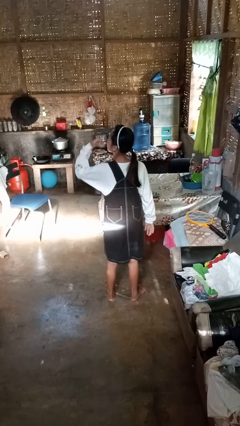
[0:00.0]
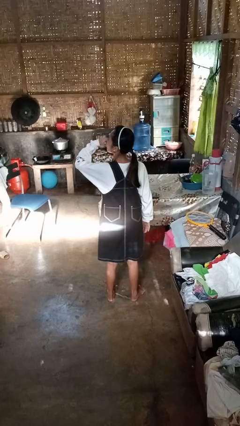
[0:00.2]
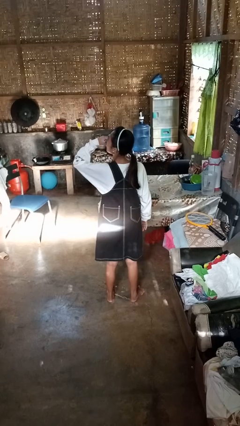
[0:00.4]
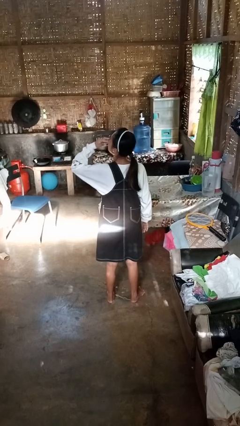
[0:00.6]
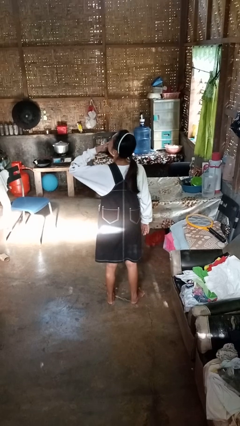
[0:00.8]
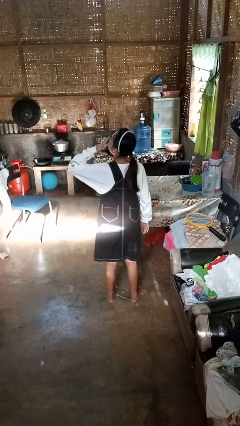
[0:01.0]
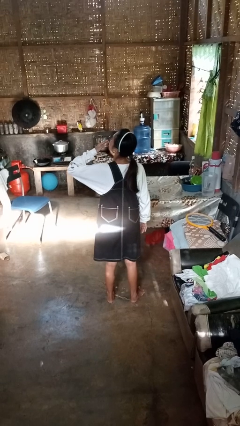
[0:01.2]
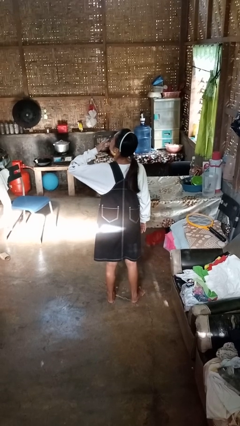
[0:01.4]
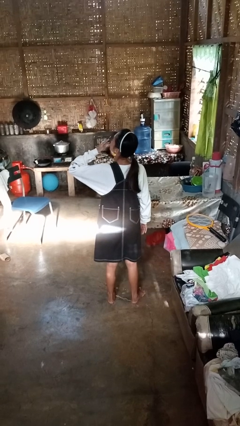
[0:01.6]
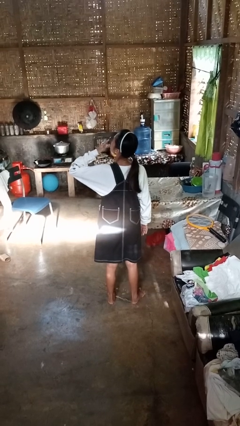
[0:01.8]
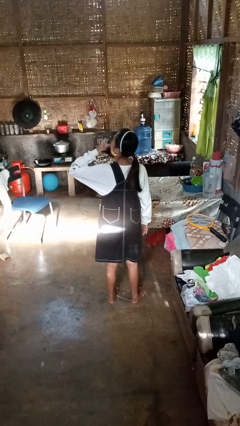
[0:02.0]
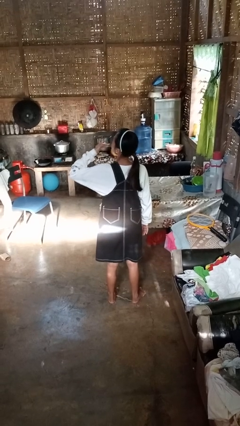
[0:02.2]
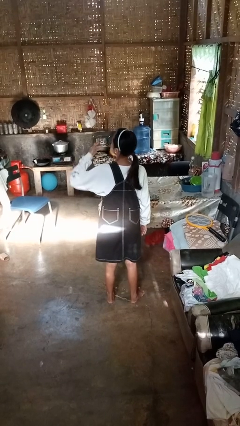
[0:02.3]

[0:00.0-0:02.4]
person licks fingers

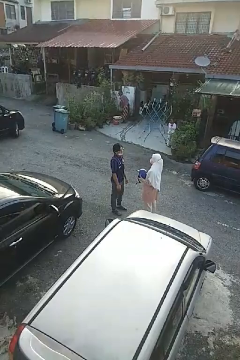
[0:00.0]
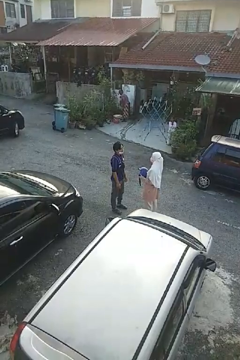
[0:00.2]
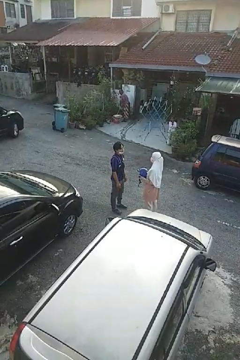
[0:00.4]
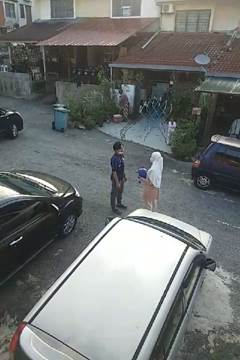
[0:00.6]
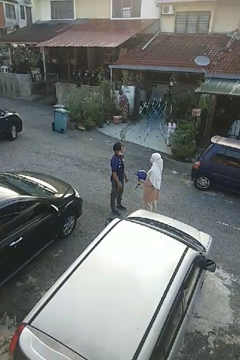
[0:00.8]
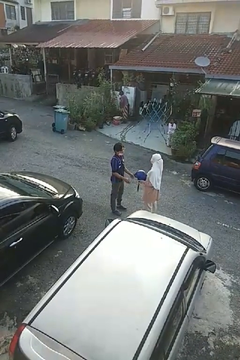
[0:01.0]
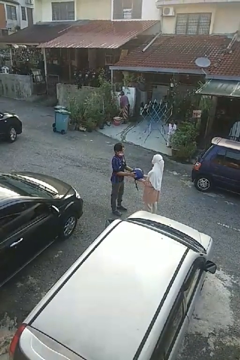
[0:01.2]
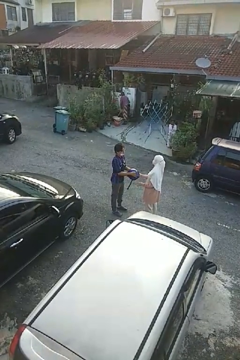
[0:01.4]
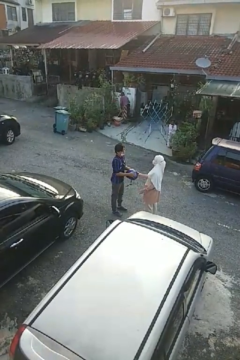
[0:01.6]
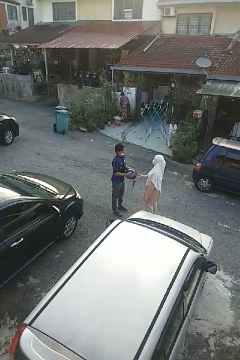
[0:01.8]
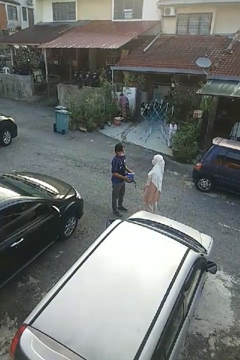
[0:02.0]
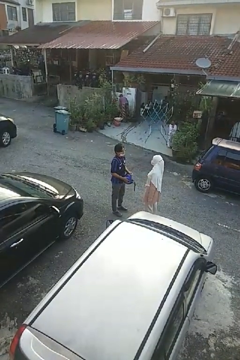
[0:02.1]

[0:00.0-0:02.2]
person transfers object to person

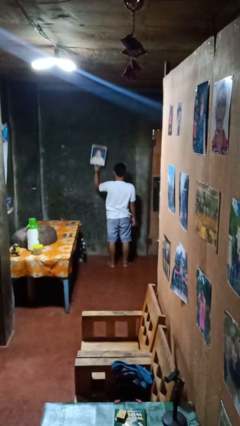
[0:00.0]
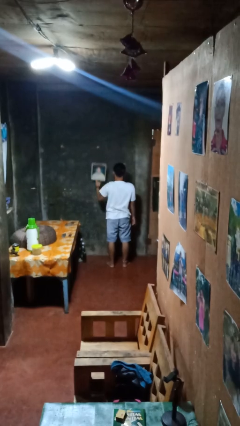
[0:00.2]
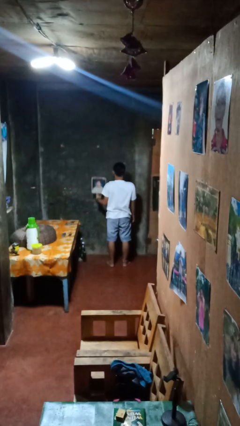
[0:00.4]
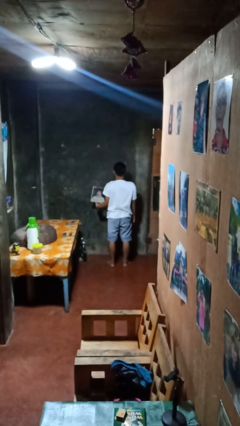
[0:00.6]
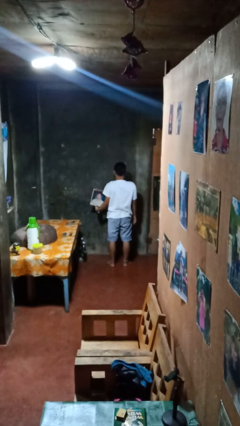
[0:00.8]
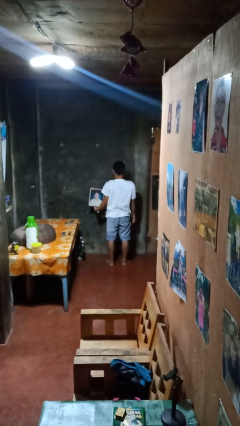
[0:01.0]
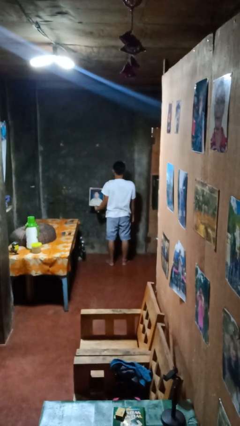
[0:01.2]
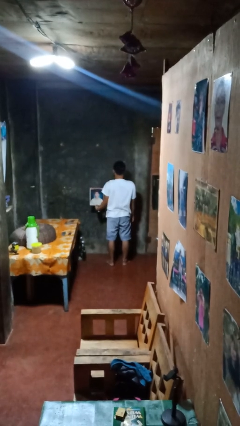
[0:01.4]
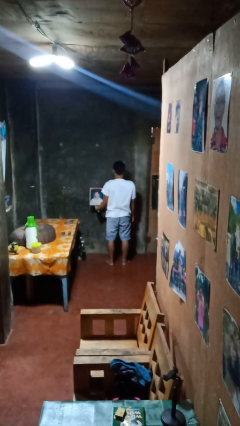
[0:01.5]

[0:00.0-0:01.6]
person takes down picture frame

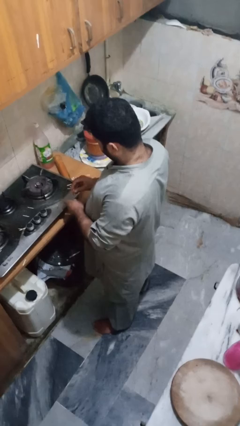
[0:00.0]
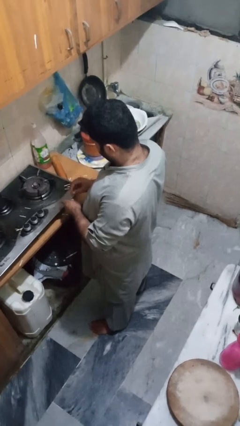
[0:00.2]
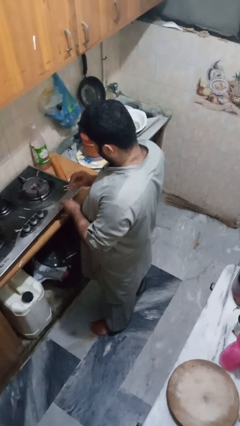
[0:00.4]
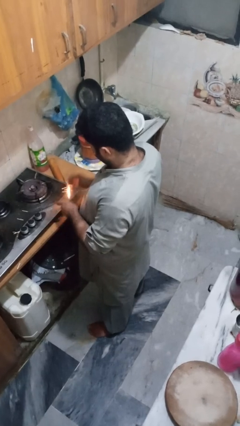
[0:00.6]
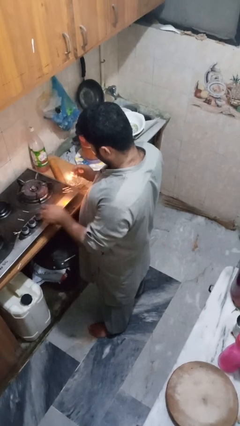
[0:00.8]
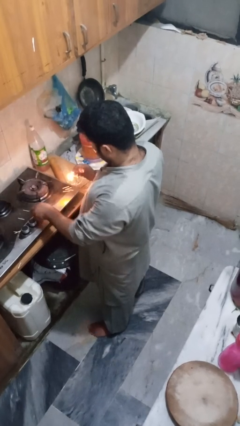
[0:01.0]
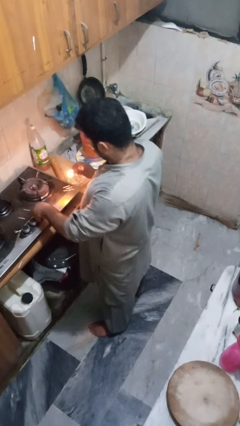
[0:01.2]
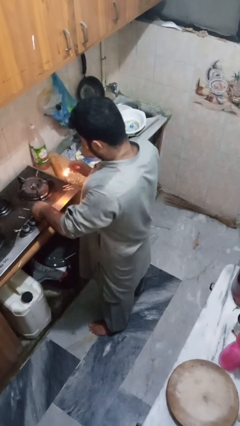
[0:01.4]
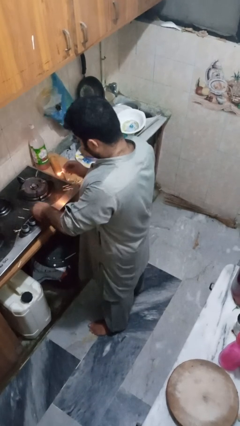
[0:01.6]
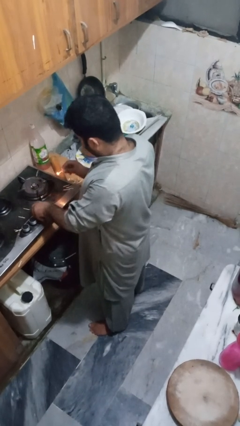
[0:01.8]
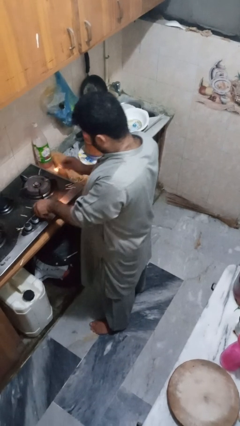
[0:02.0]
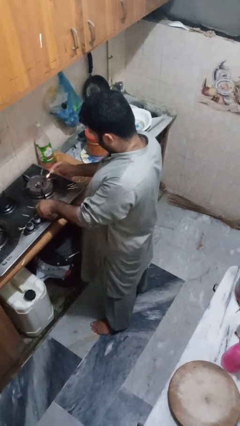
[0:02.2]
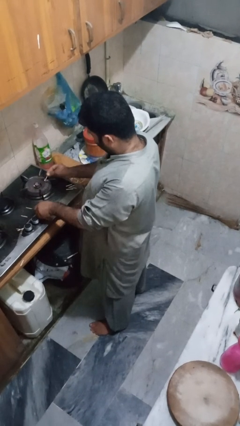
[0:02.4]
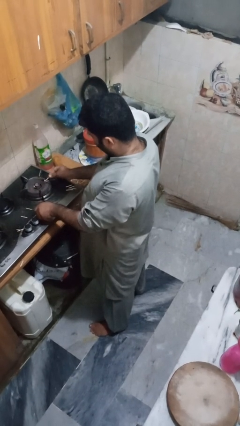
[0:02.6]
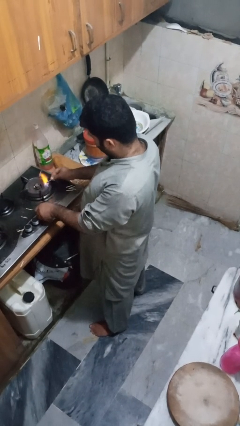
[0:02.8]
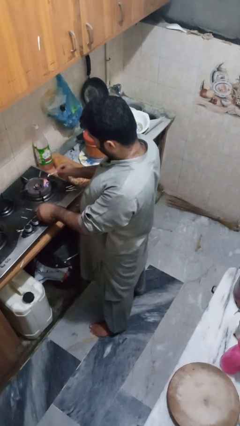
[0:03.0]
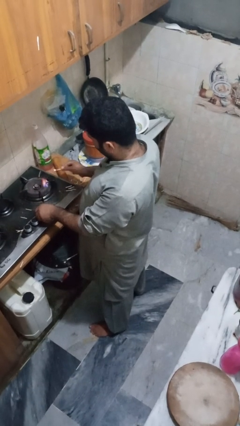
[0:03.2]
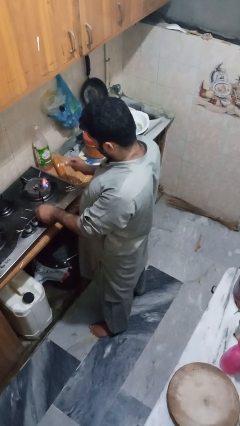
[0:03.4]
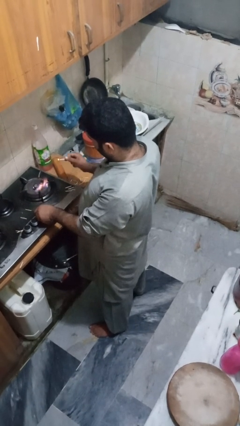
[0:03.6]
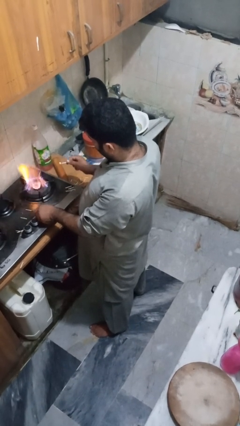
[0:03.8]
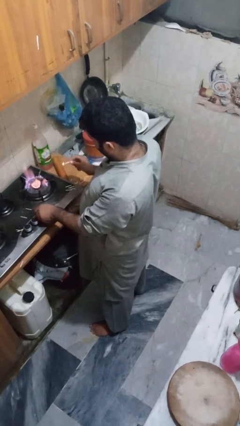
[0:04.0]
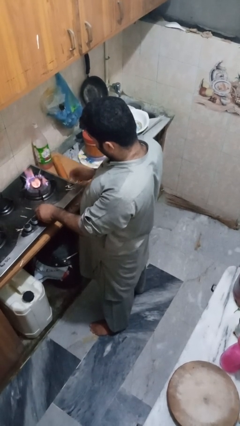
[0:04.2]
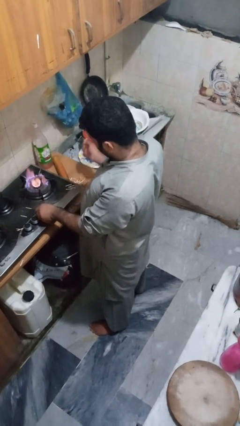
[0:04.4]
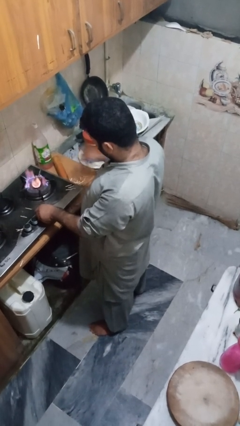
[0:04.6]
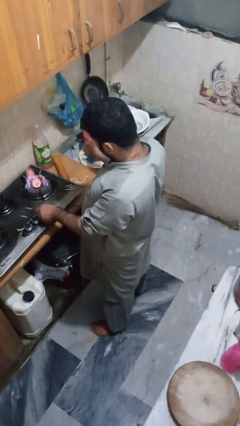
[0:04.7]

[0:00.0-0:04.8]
person turns on stovetop

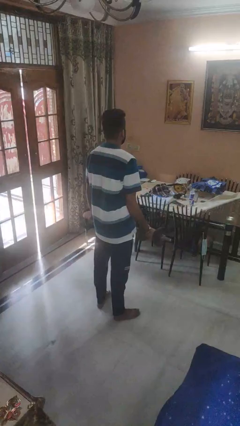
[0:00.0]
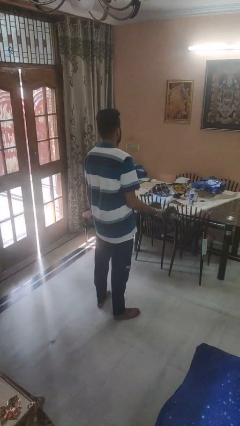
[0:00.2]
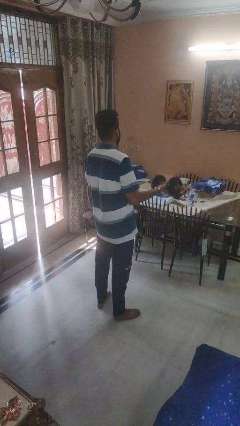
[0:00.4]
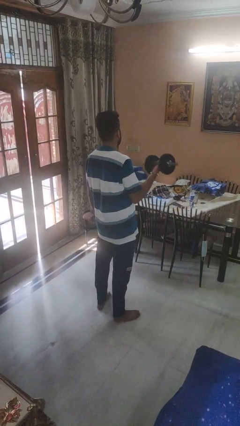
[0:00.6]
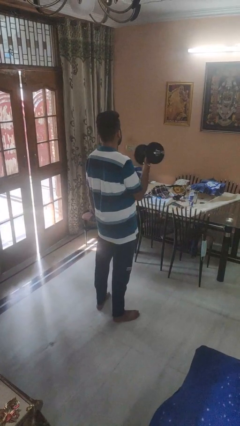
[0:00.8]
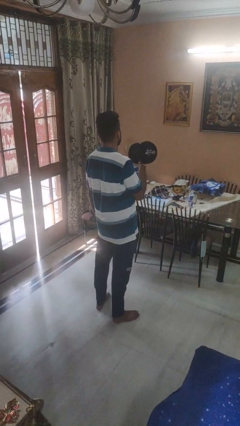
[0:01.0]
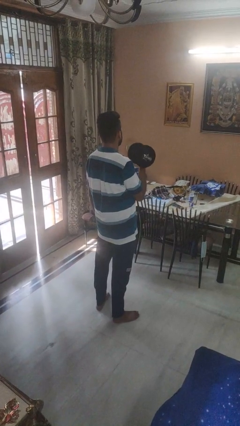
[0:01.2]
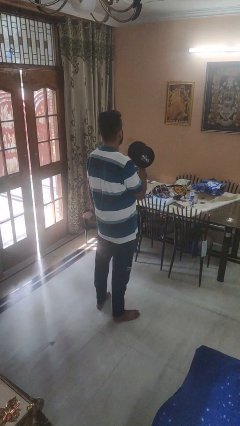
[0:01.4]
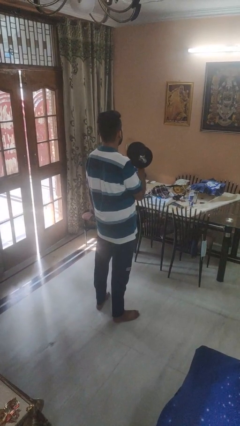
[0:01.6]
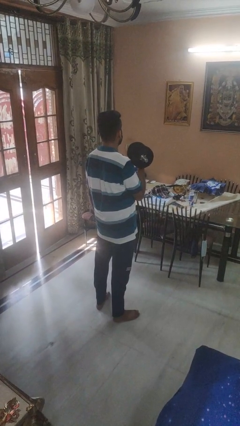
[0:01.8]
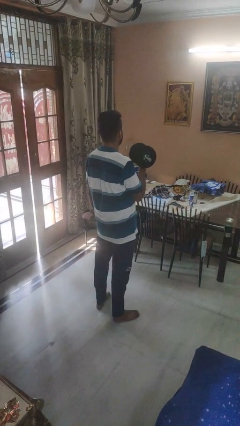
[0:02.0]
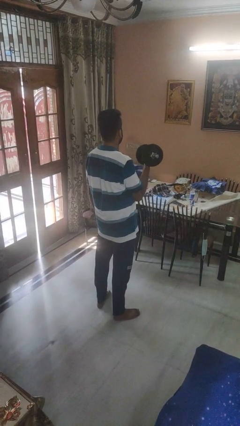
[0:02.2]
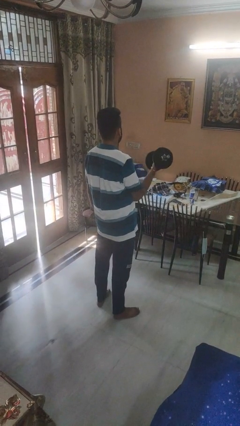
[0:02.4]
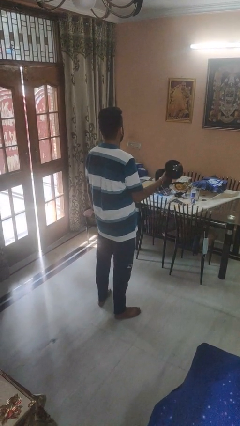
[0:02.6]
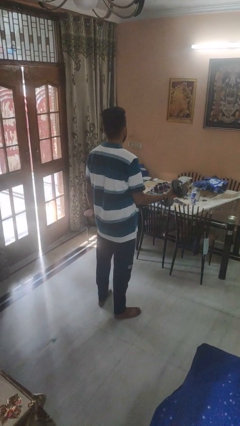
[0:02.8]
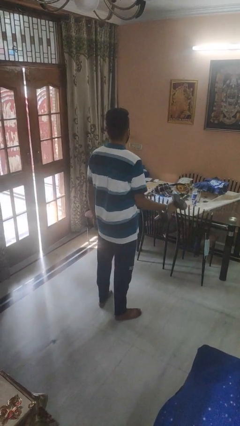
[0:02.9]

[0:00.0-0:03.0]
person lifts dumbbells

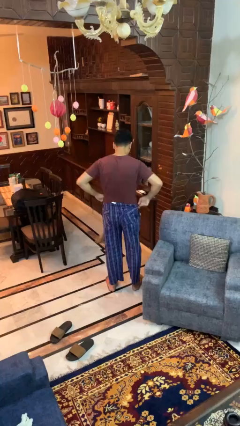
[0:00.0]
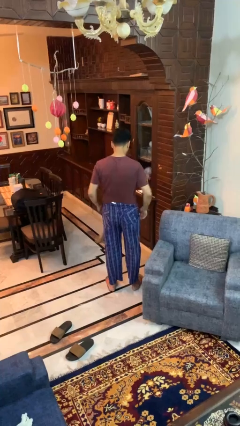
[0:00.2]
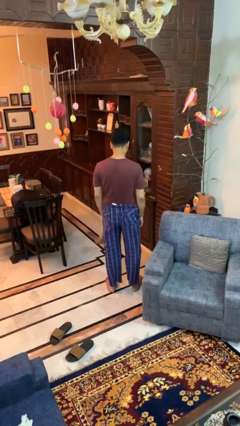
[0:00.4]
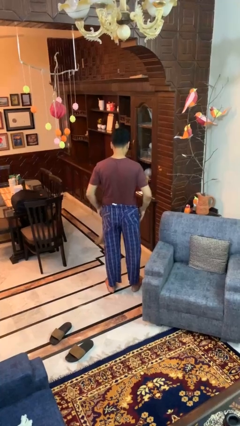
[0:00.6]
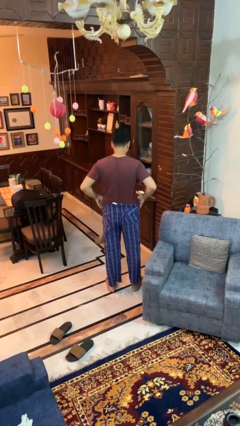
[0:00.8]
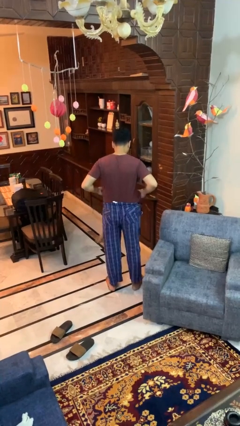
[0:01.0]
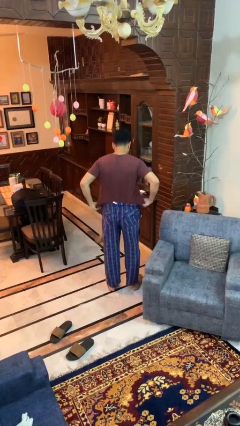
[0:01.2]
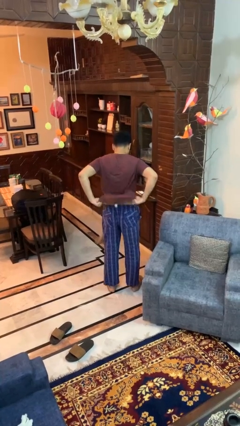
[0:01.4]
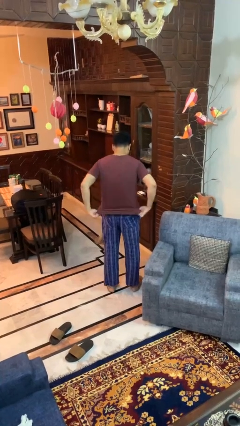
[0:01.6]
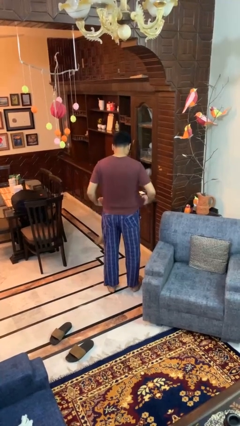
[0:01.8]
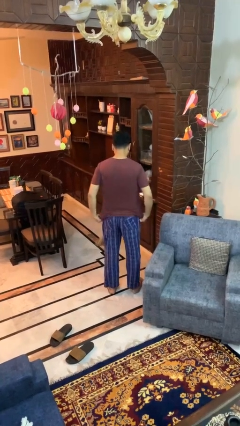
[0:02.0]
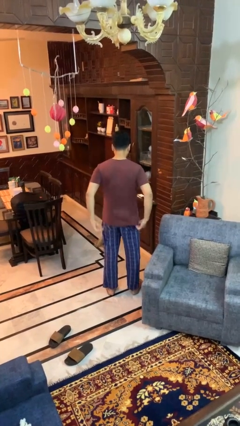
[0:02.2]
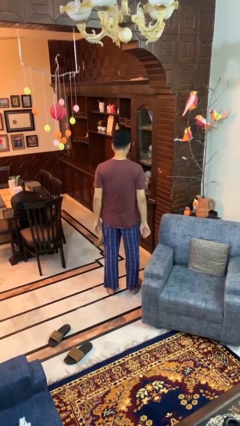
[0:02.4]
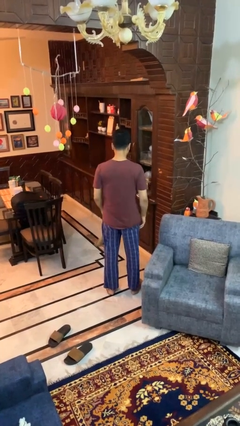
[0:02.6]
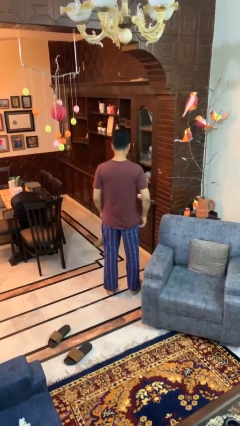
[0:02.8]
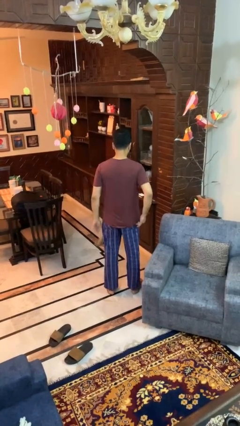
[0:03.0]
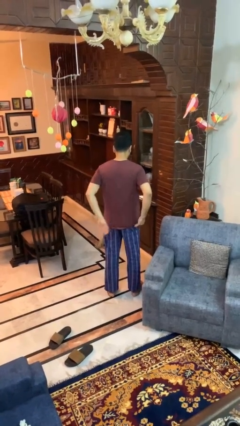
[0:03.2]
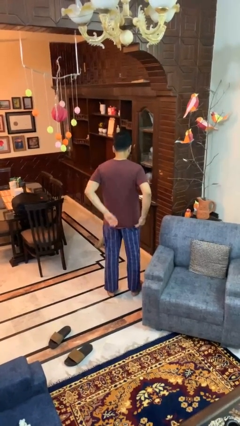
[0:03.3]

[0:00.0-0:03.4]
person untucks shirt

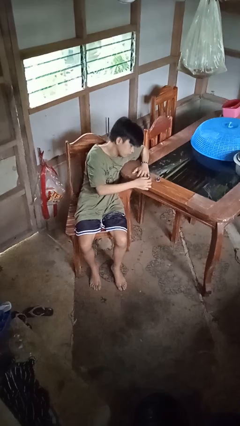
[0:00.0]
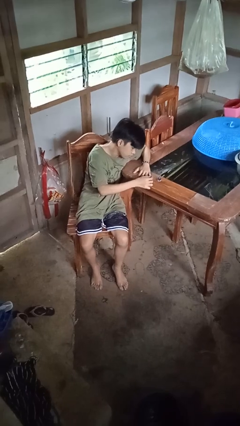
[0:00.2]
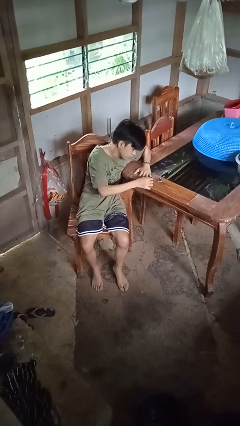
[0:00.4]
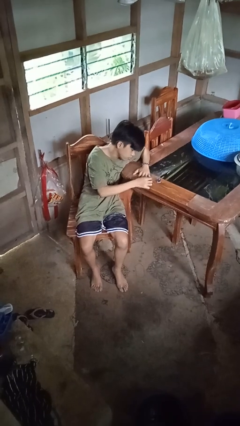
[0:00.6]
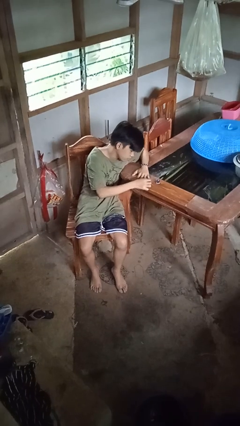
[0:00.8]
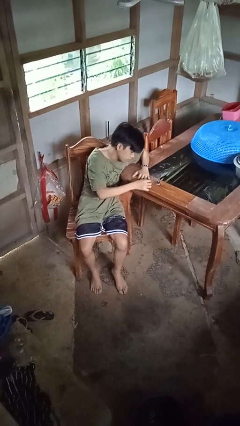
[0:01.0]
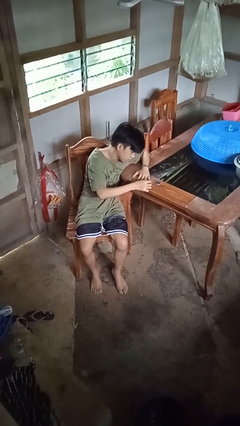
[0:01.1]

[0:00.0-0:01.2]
person paints fingernails
